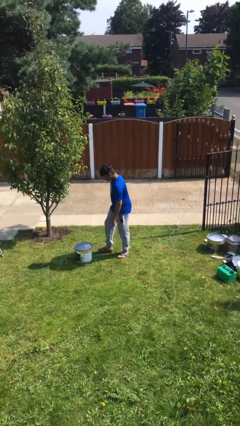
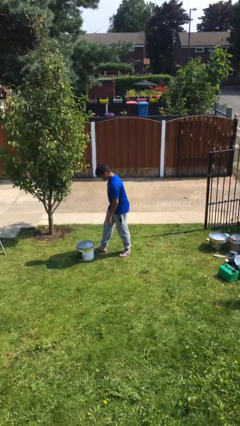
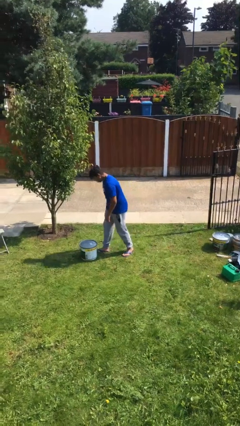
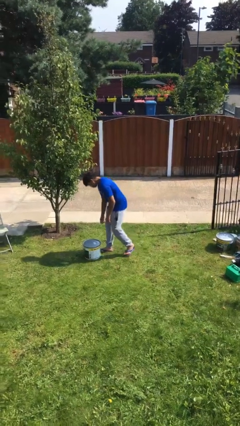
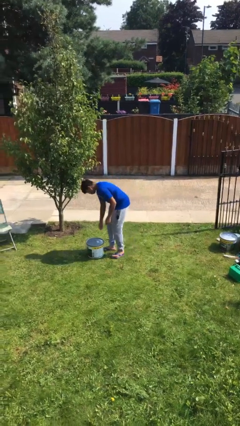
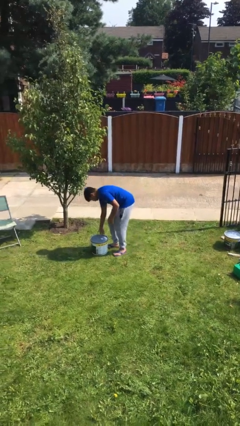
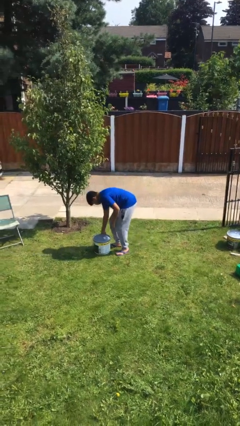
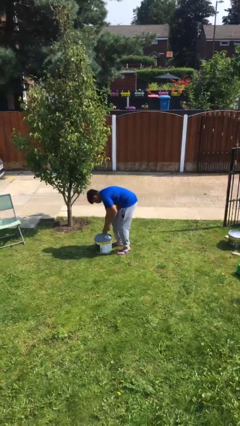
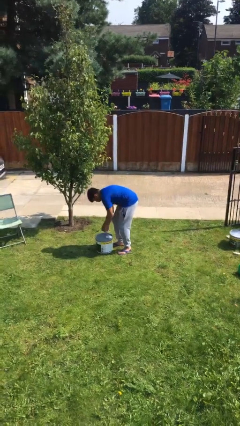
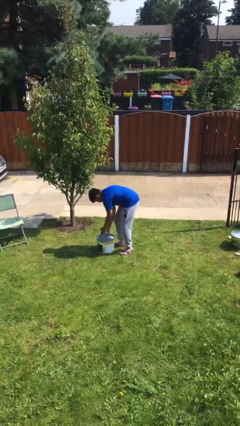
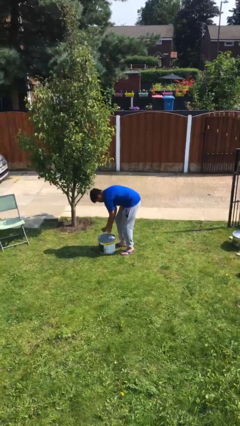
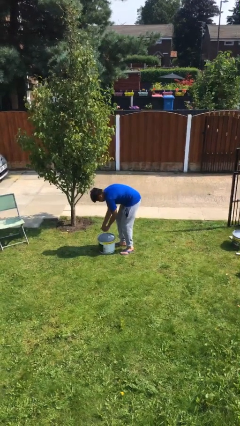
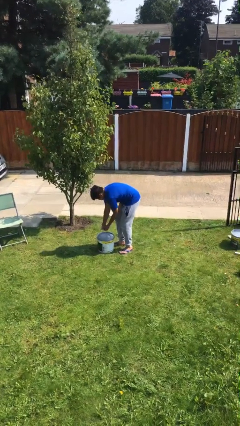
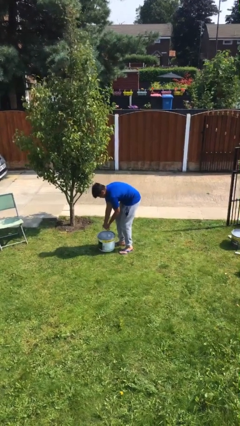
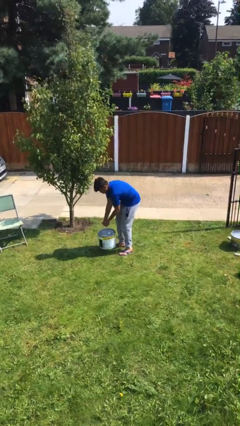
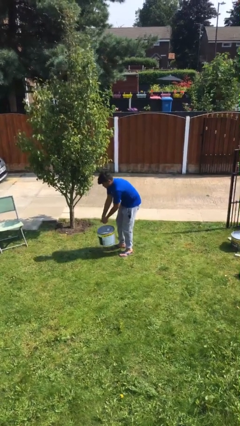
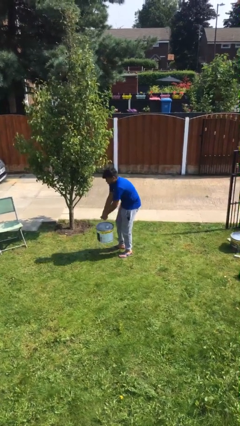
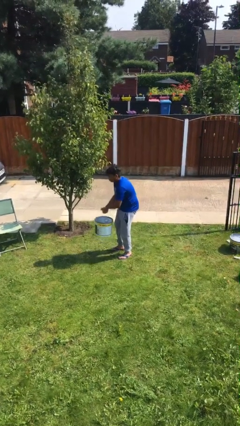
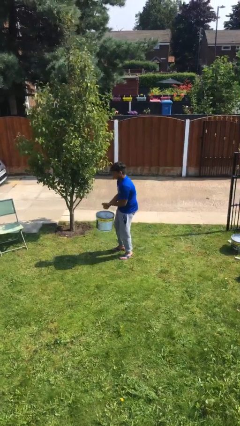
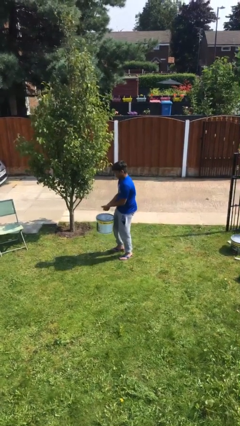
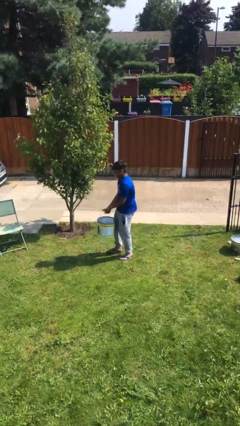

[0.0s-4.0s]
person picks up object from floor

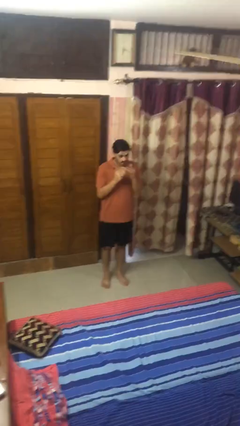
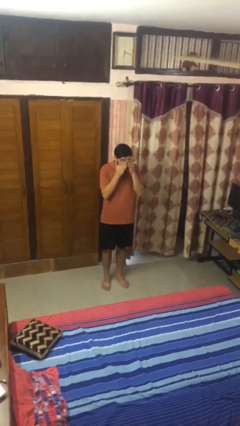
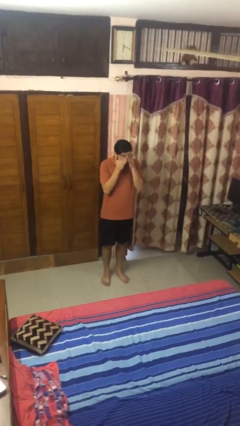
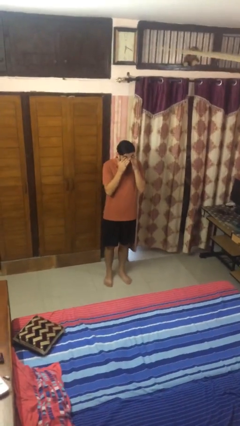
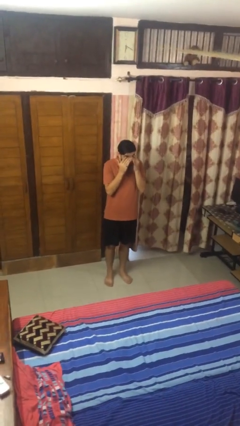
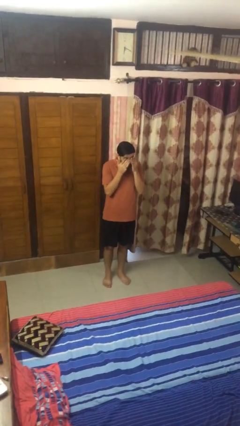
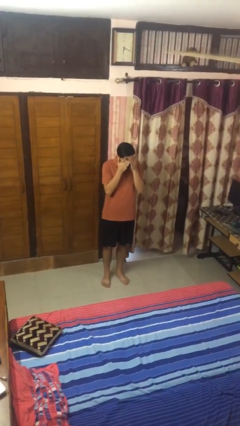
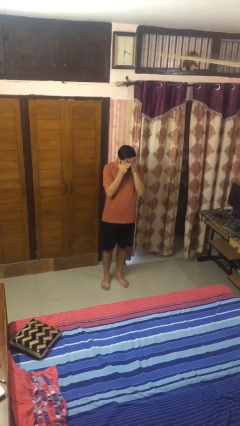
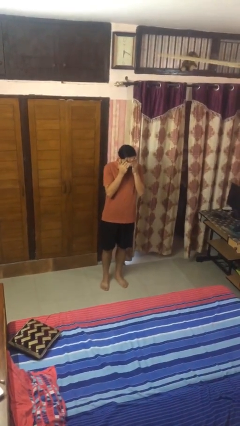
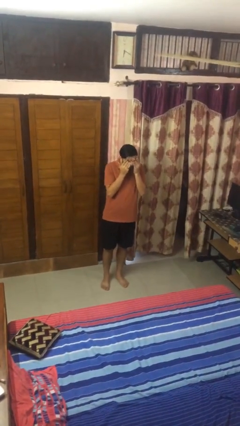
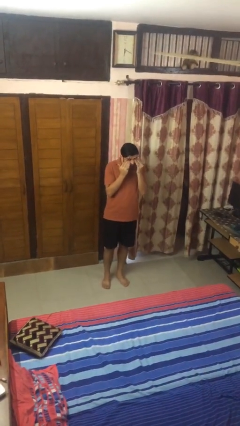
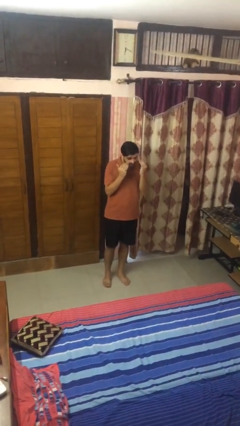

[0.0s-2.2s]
person rubs eyes

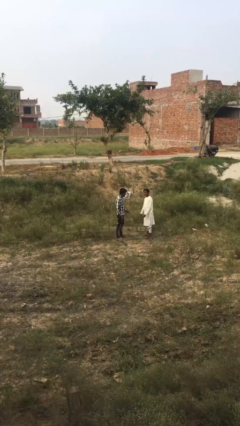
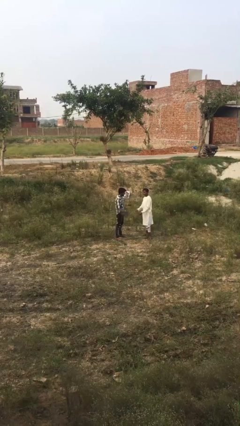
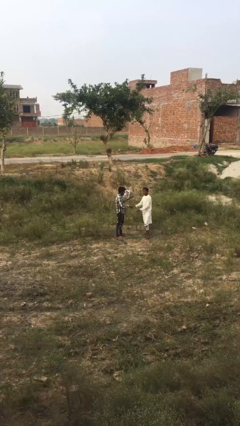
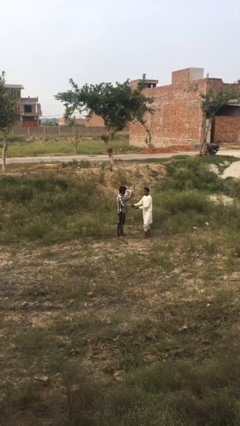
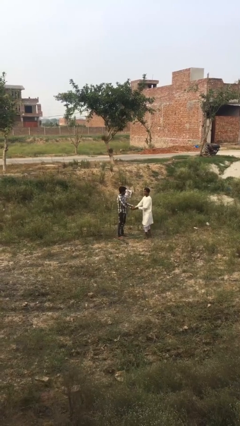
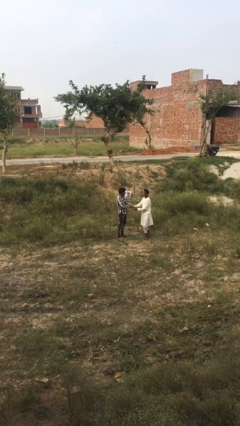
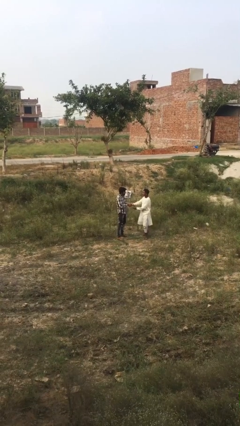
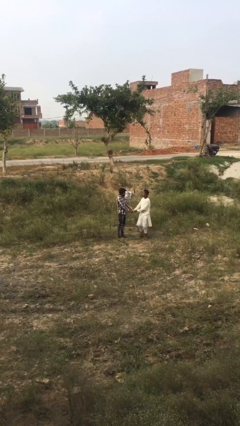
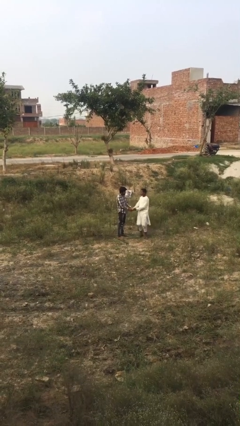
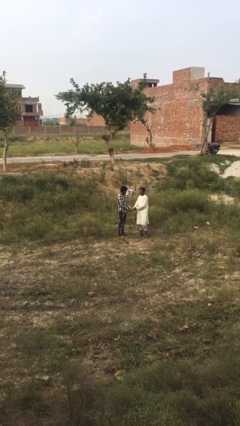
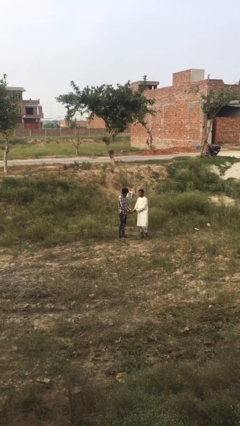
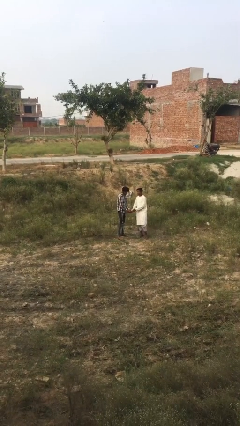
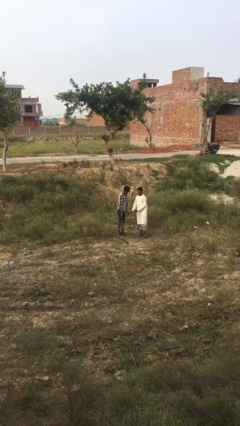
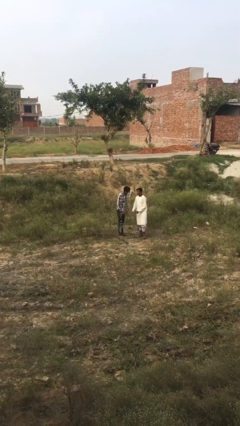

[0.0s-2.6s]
person shakes hand

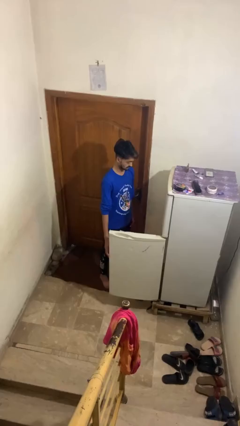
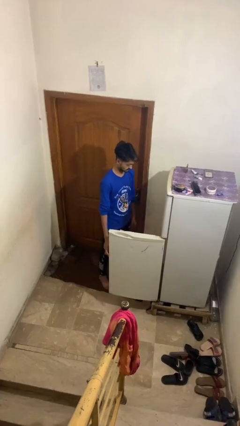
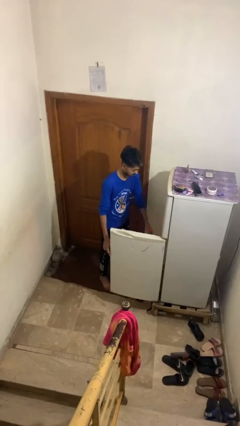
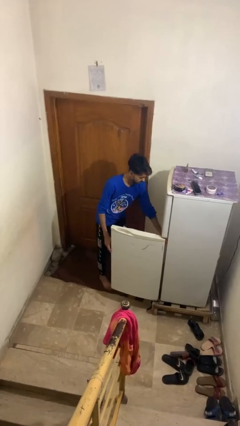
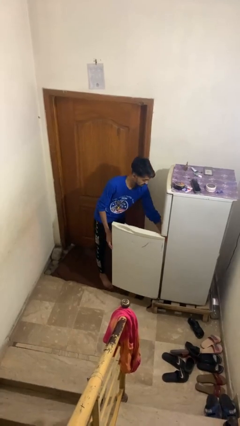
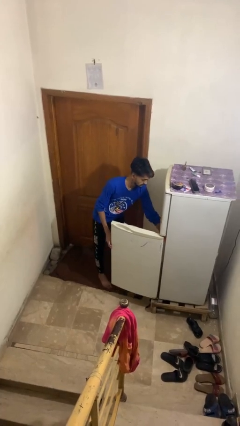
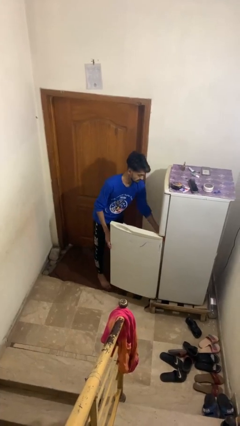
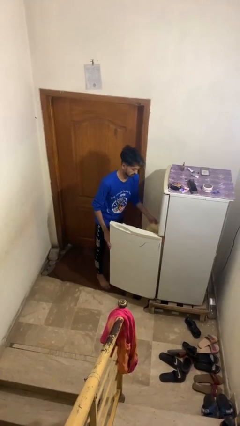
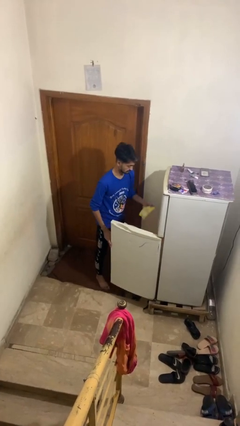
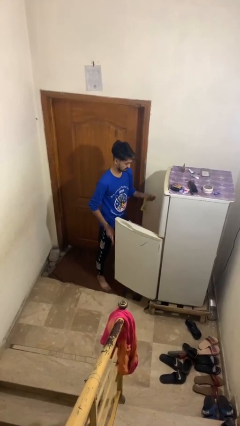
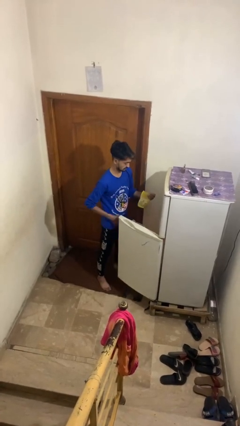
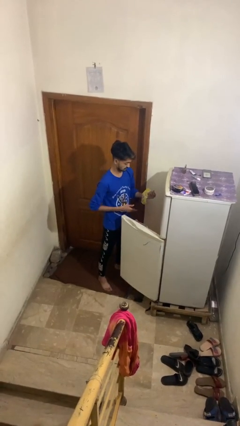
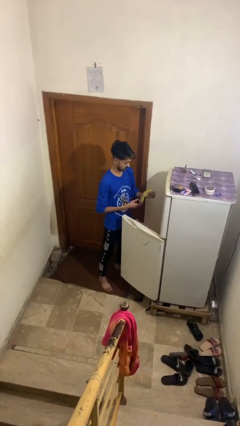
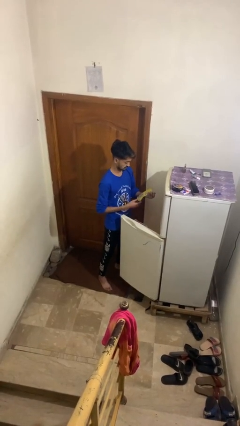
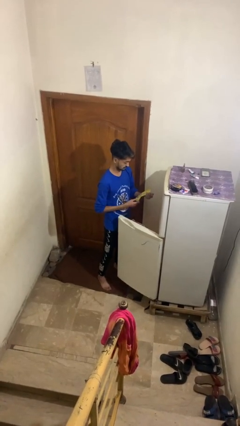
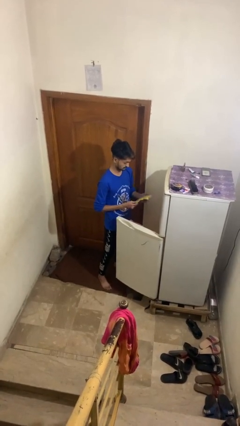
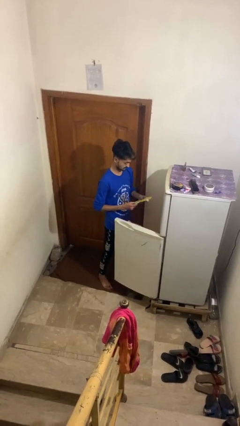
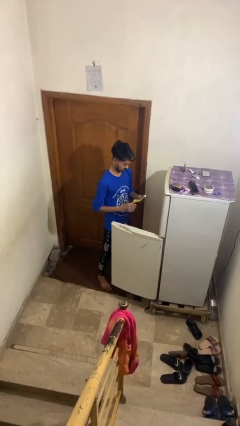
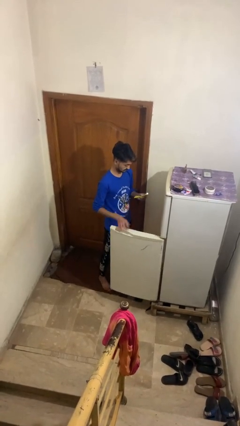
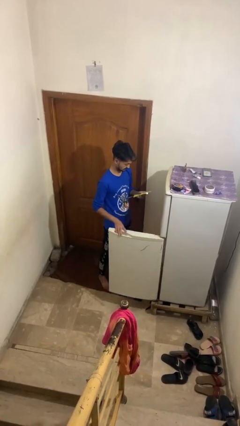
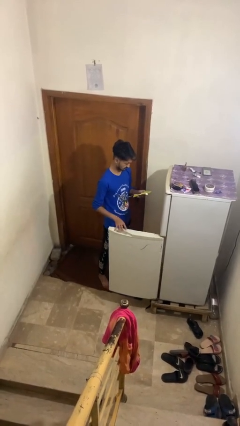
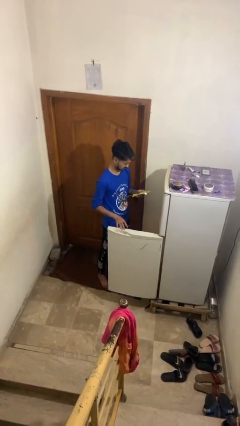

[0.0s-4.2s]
person takes object from refrigerator

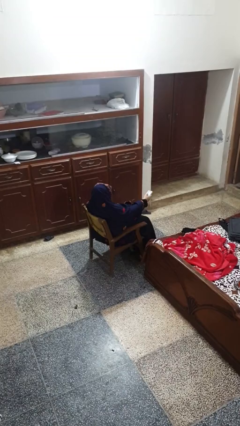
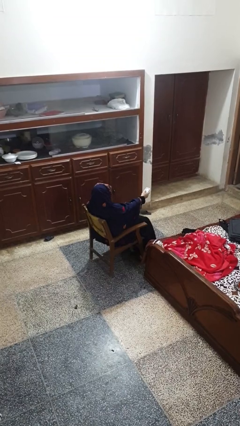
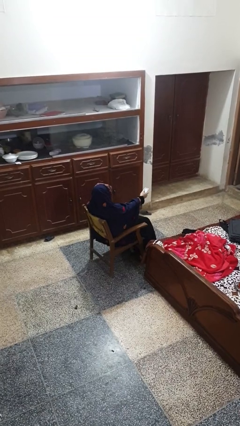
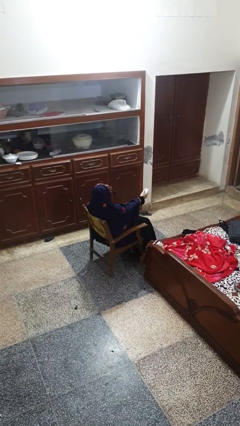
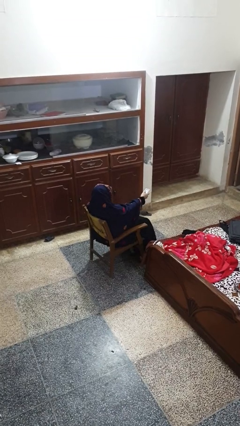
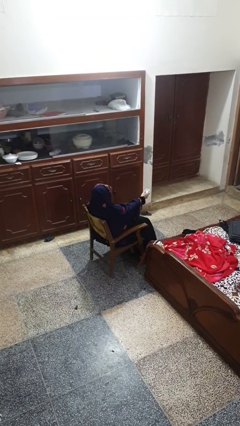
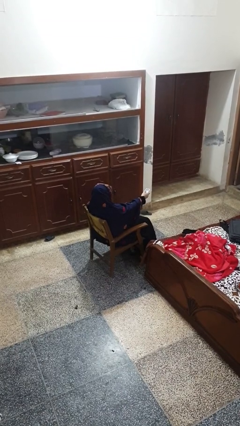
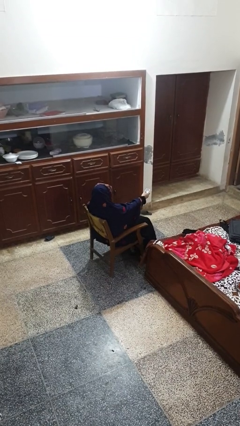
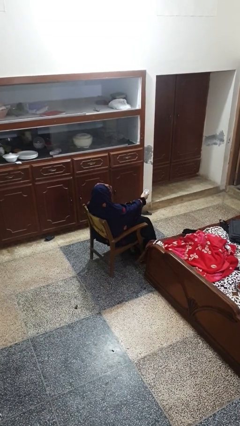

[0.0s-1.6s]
person uses television remote

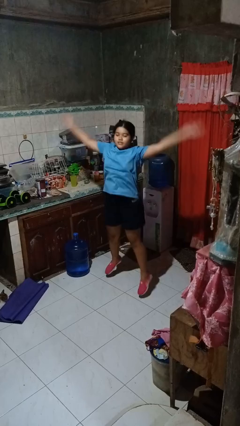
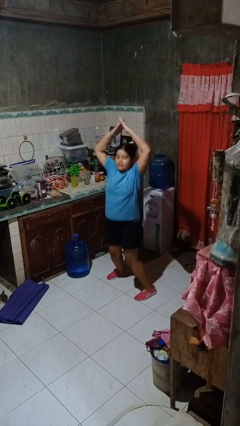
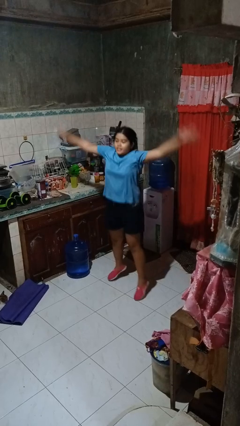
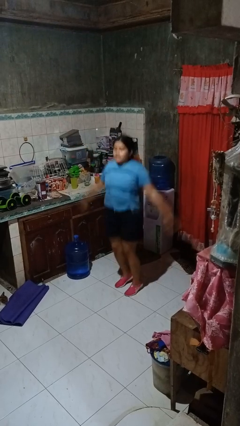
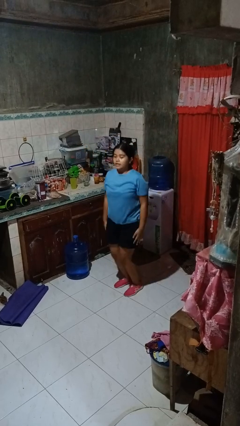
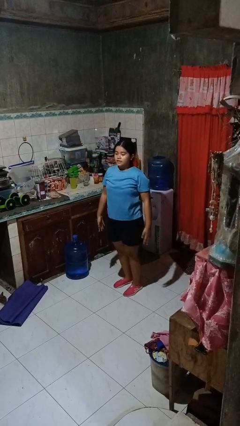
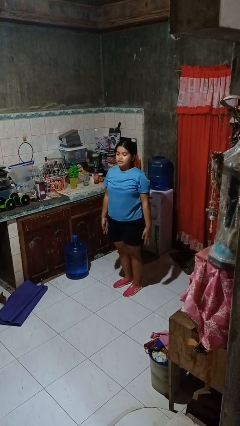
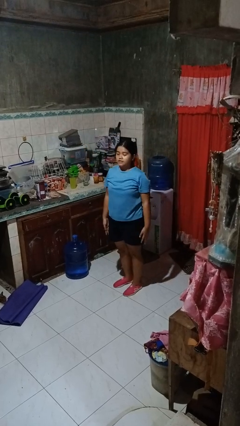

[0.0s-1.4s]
person exercises with jumping jacks

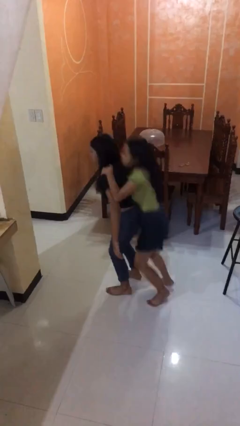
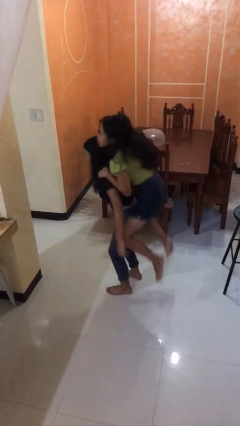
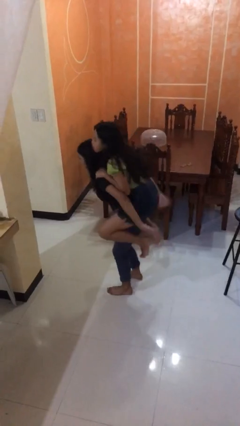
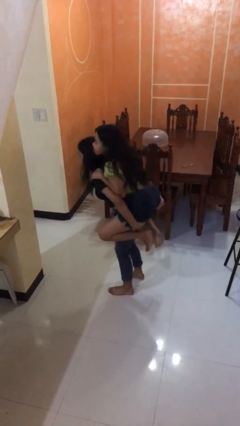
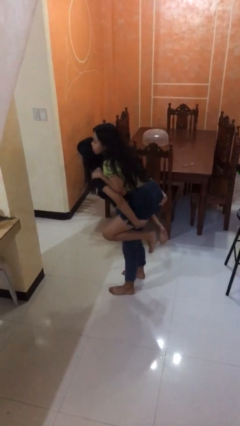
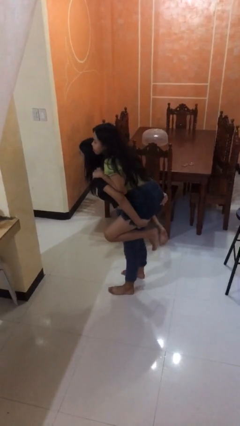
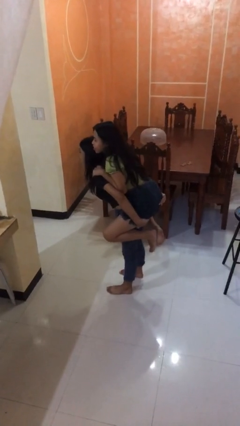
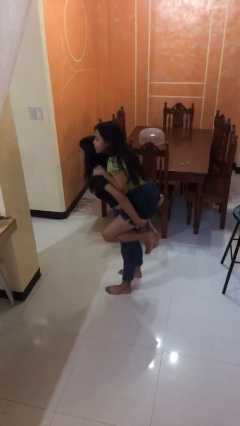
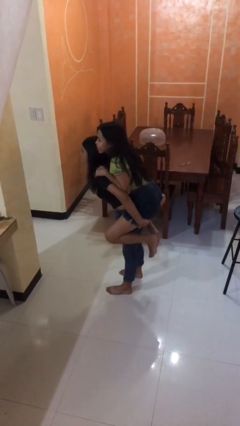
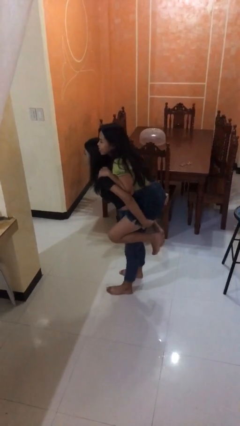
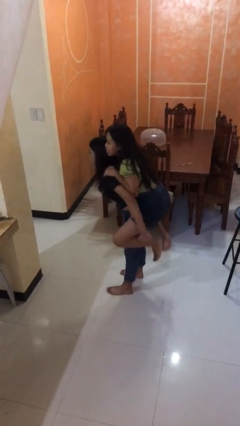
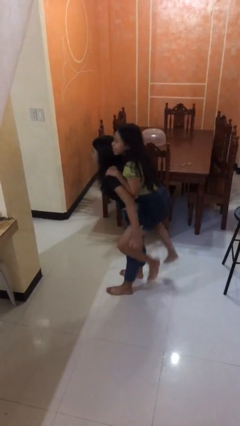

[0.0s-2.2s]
person carries person over shoulder
